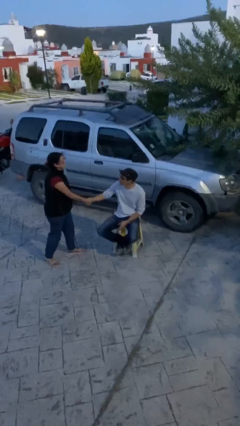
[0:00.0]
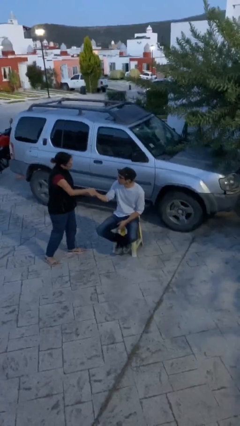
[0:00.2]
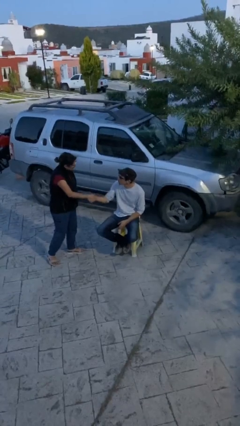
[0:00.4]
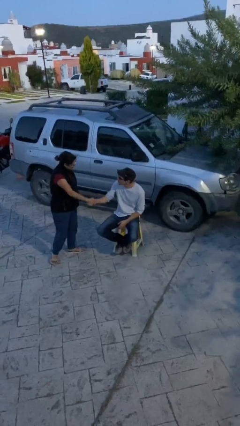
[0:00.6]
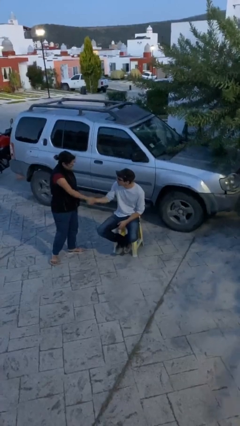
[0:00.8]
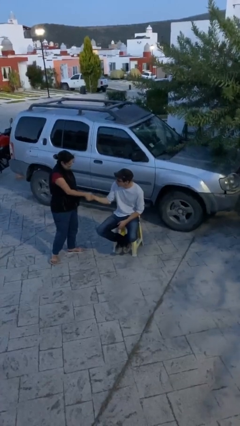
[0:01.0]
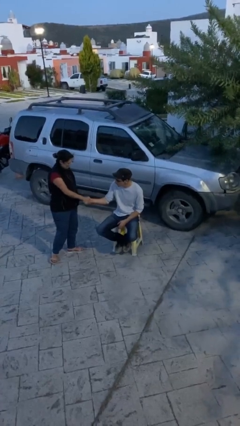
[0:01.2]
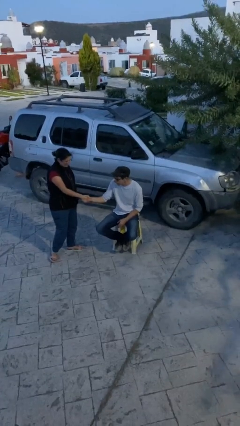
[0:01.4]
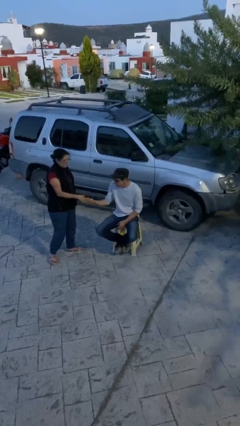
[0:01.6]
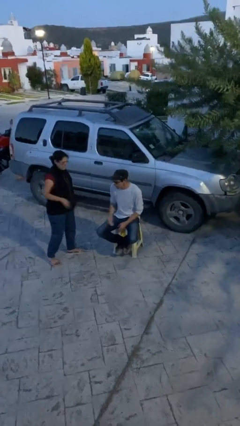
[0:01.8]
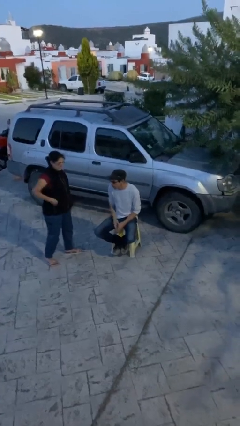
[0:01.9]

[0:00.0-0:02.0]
person shakes hand

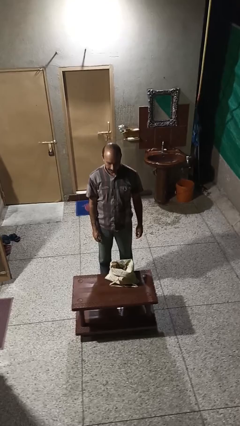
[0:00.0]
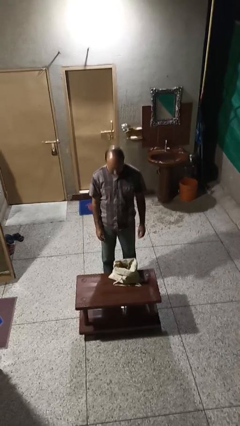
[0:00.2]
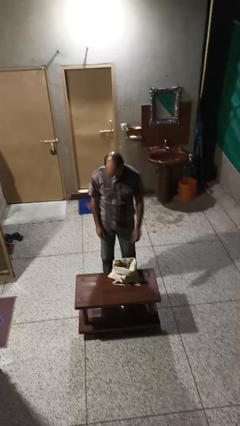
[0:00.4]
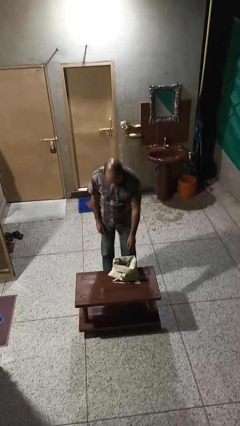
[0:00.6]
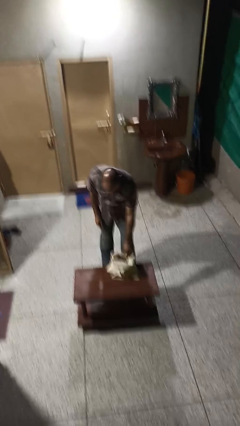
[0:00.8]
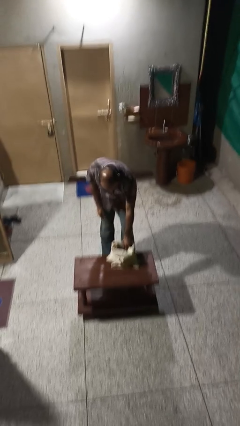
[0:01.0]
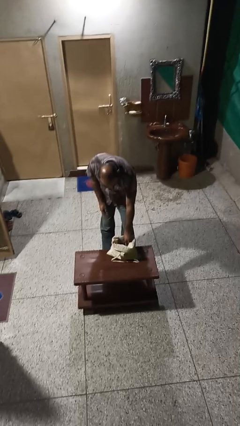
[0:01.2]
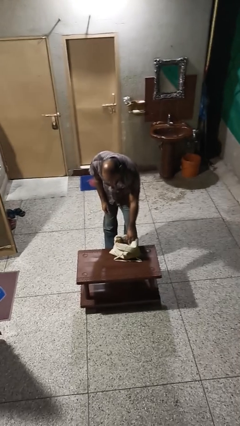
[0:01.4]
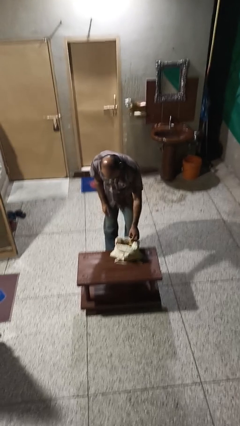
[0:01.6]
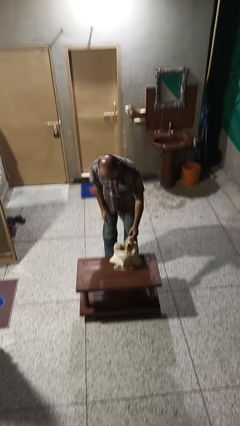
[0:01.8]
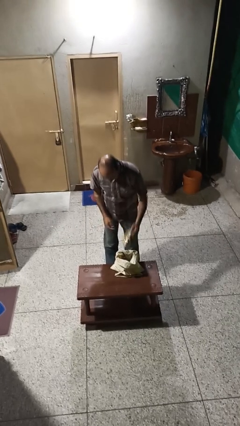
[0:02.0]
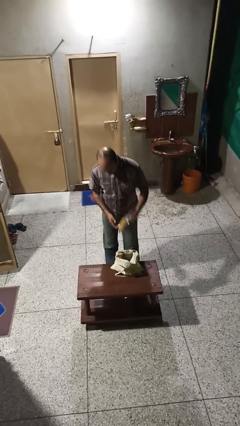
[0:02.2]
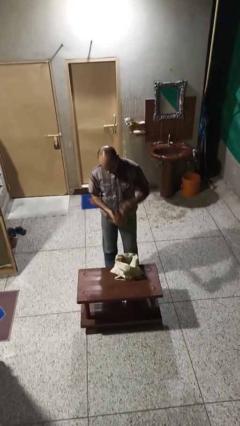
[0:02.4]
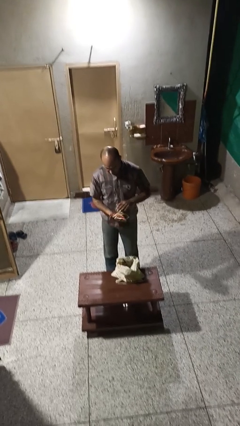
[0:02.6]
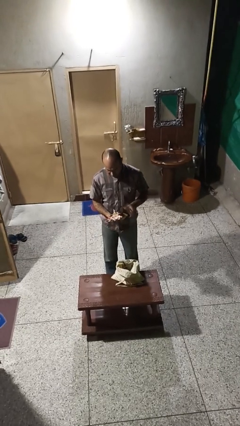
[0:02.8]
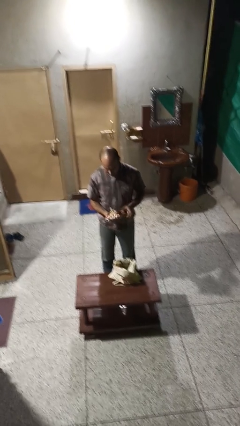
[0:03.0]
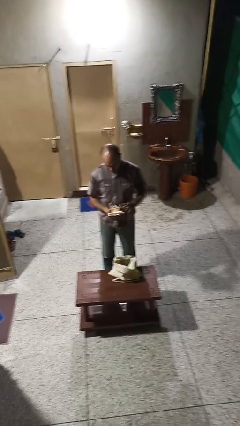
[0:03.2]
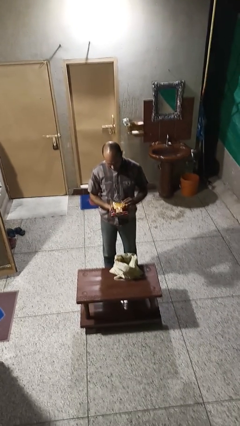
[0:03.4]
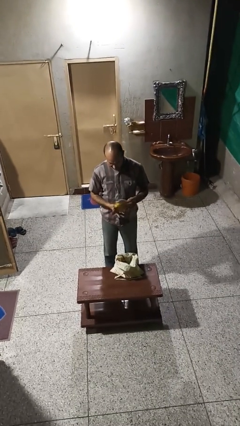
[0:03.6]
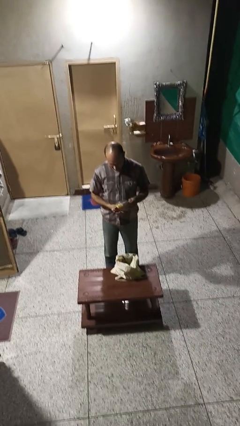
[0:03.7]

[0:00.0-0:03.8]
person takes object from bag

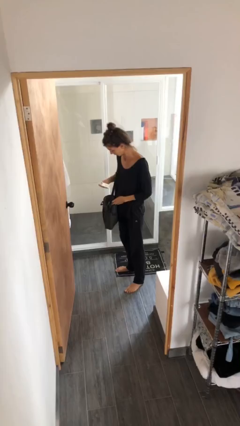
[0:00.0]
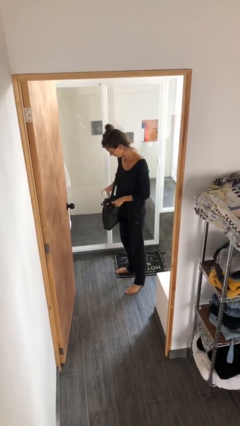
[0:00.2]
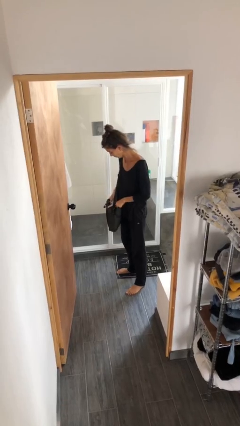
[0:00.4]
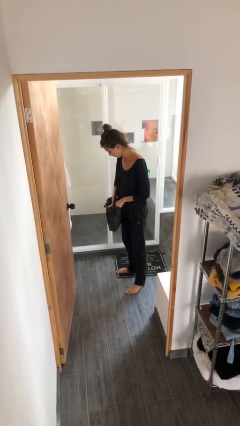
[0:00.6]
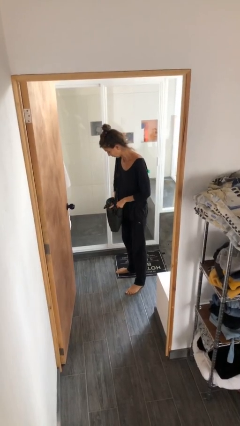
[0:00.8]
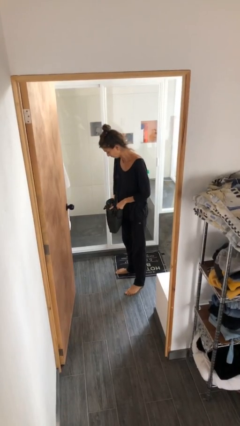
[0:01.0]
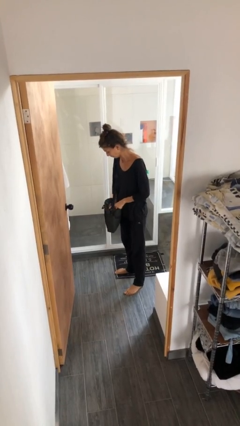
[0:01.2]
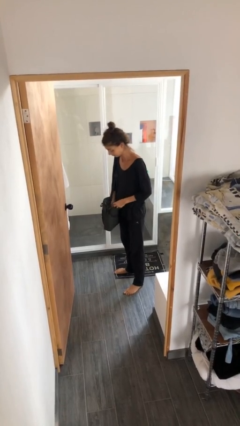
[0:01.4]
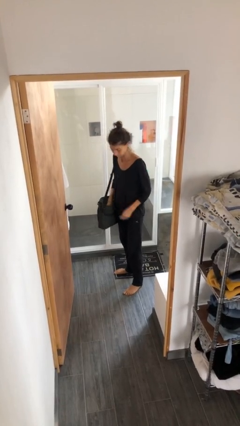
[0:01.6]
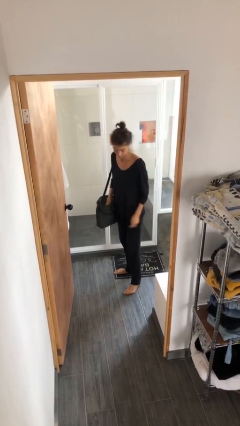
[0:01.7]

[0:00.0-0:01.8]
person puts object into purse

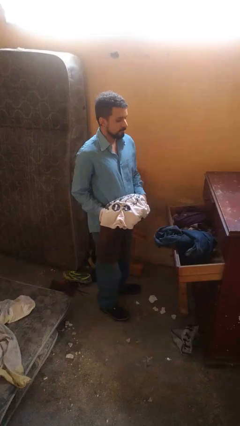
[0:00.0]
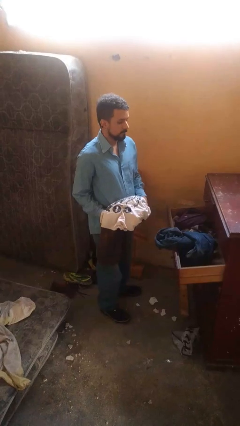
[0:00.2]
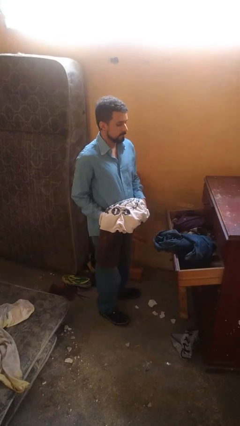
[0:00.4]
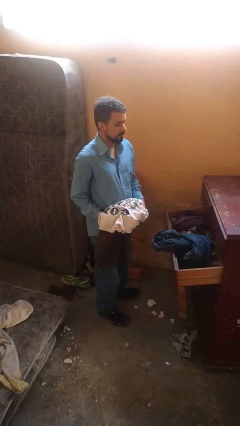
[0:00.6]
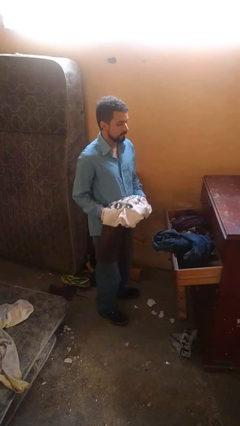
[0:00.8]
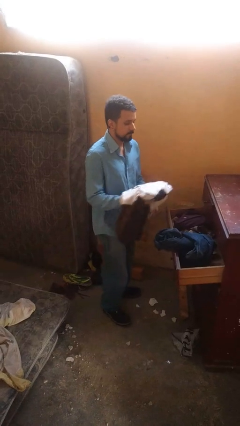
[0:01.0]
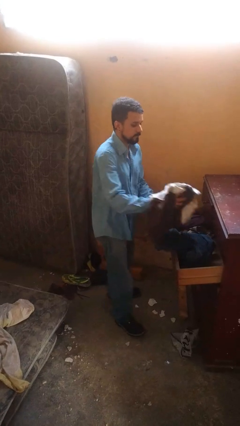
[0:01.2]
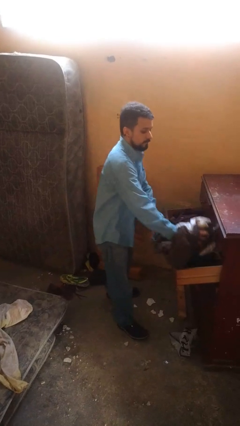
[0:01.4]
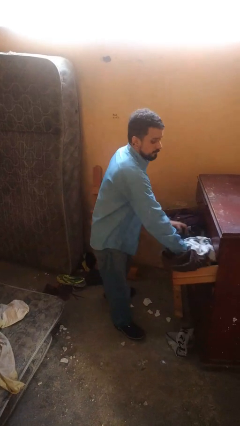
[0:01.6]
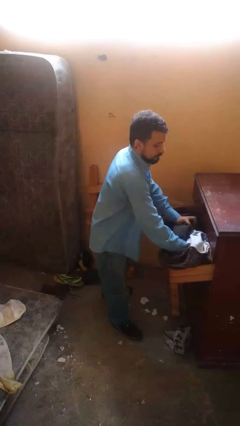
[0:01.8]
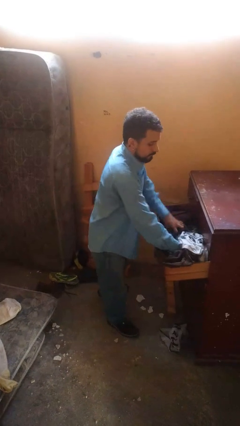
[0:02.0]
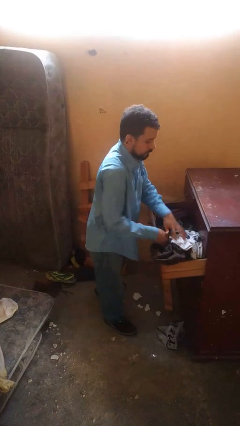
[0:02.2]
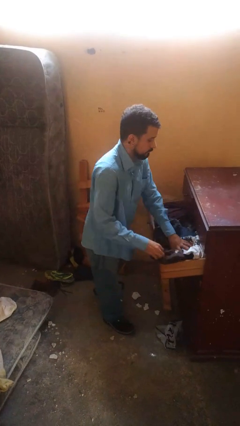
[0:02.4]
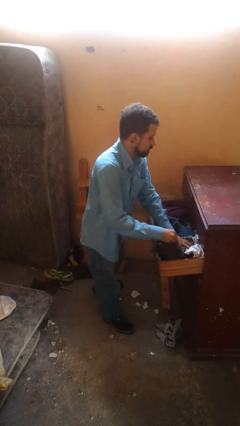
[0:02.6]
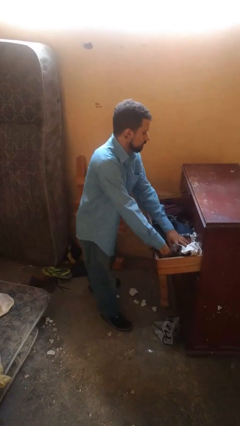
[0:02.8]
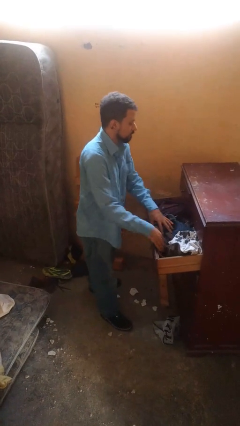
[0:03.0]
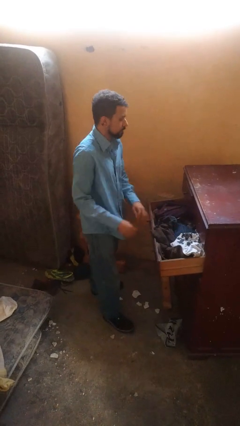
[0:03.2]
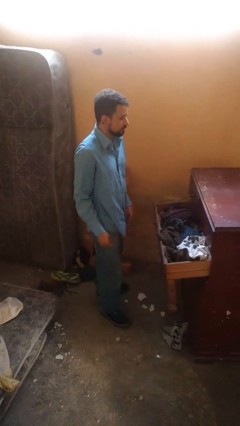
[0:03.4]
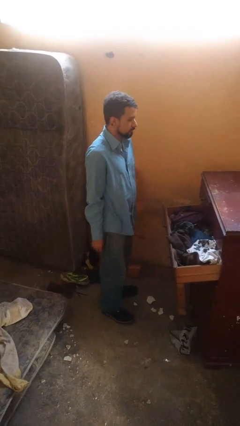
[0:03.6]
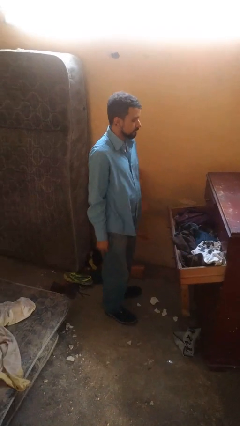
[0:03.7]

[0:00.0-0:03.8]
person puts clothes into dresser

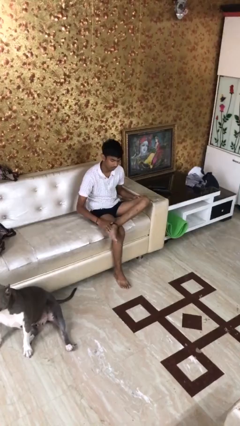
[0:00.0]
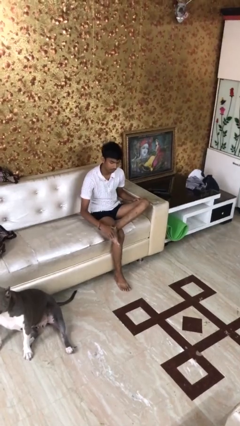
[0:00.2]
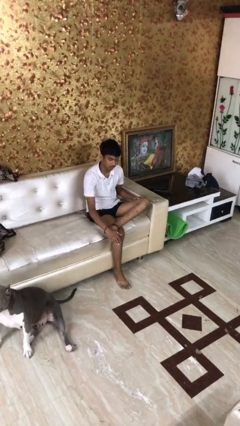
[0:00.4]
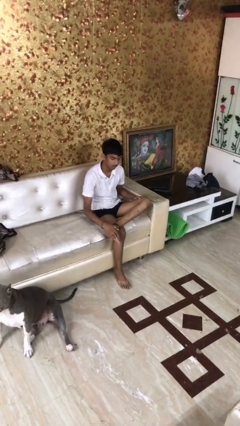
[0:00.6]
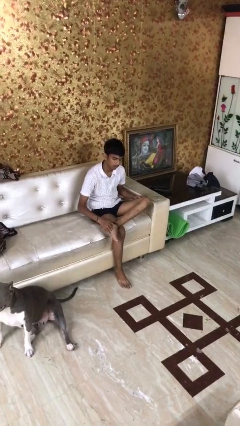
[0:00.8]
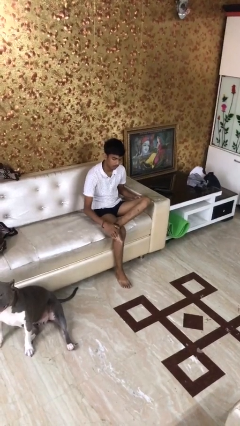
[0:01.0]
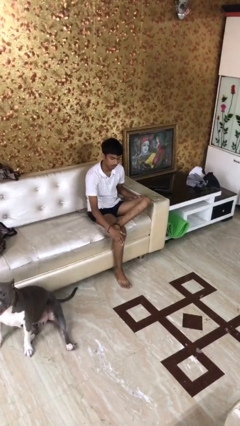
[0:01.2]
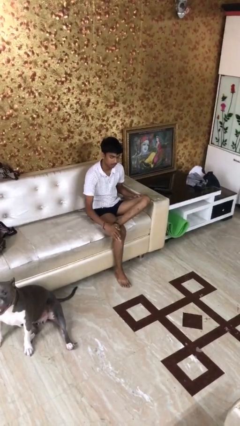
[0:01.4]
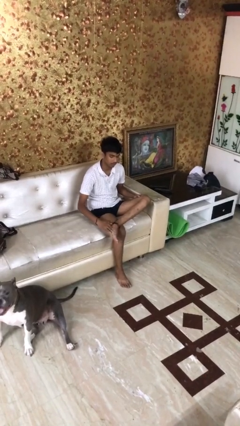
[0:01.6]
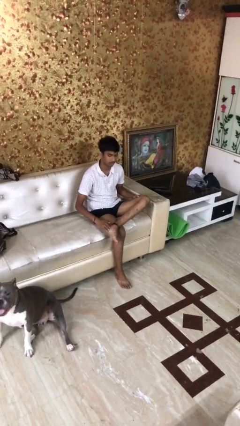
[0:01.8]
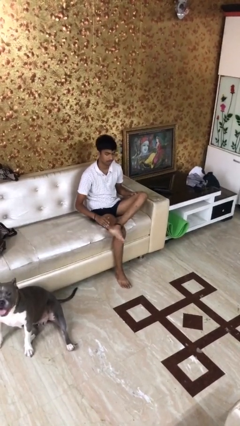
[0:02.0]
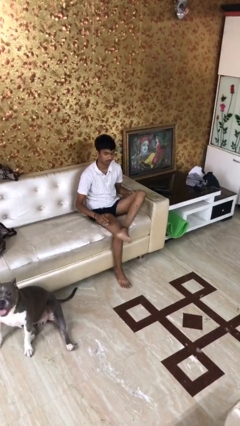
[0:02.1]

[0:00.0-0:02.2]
person rubs foot

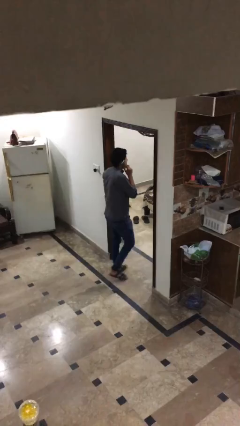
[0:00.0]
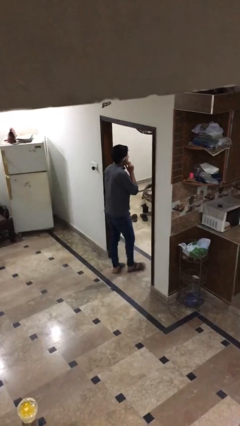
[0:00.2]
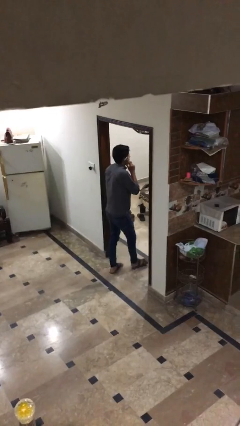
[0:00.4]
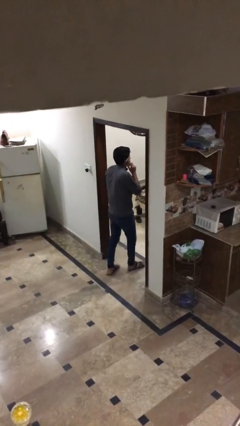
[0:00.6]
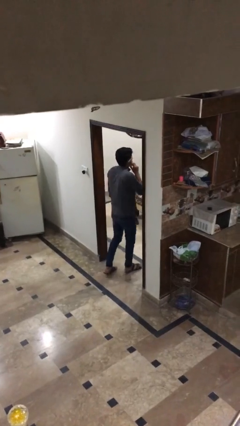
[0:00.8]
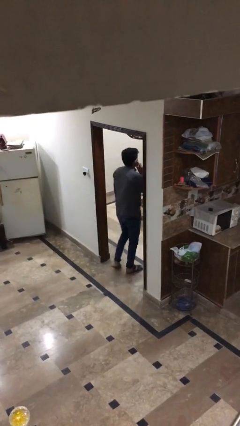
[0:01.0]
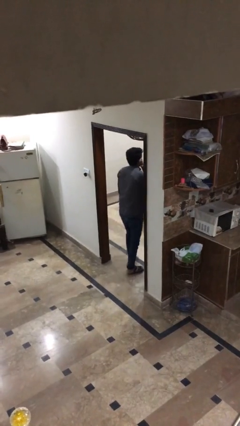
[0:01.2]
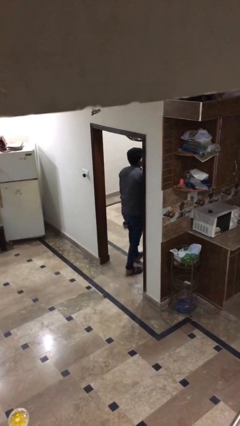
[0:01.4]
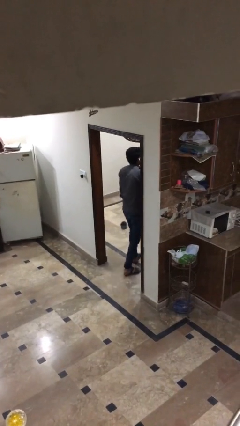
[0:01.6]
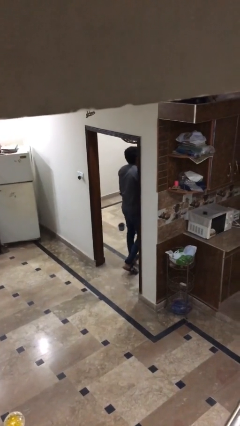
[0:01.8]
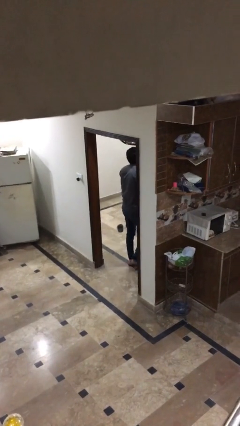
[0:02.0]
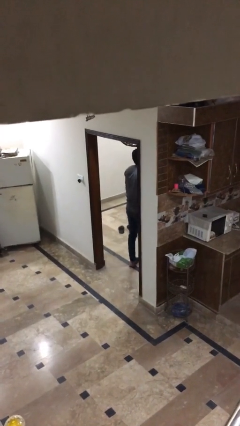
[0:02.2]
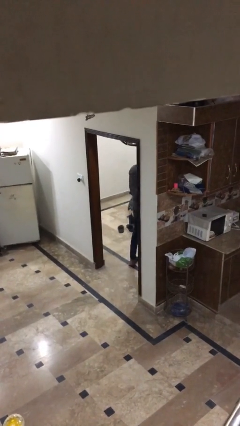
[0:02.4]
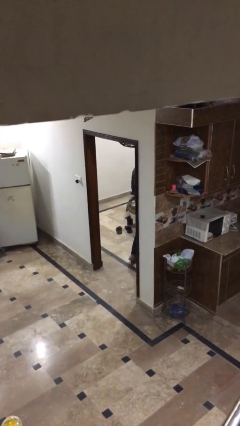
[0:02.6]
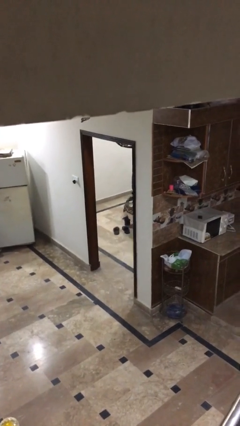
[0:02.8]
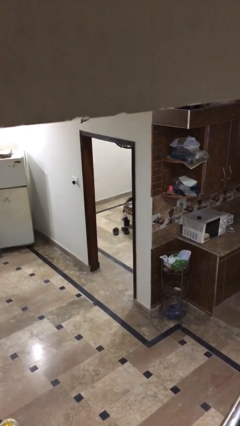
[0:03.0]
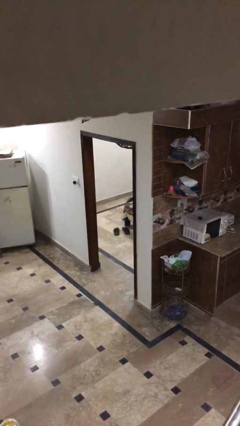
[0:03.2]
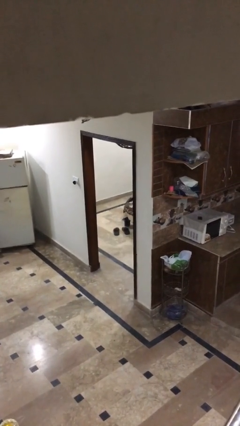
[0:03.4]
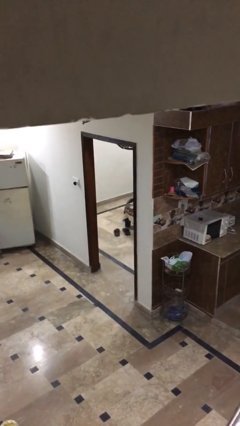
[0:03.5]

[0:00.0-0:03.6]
person exits scene through structure

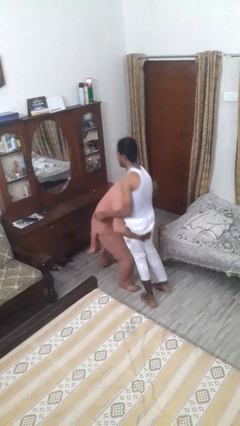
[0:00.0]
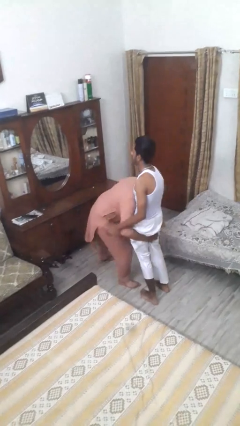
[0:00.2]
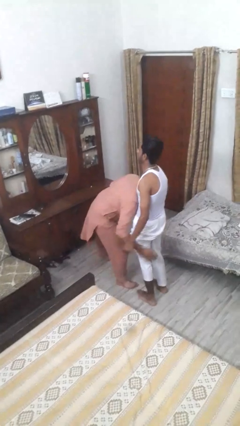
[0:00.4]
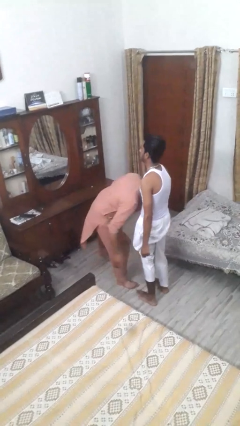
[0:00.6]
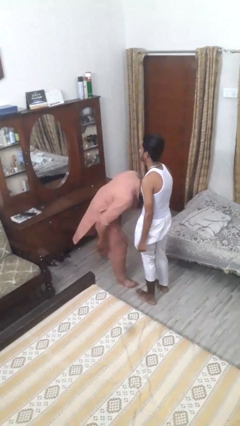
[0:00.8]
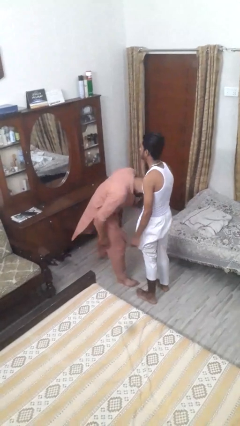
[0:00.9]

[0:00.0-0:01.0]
person puts down person
